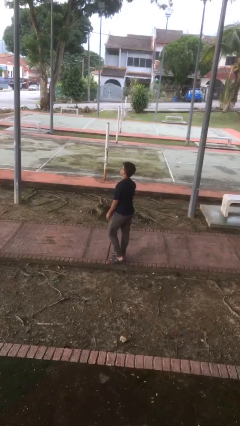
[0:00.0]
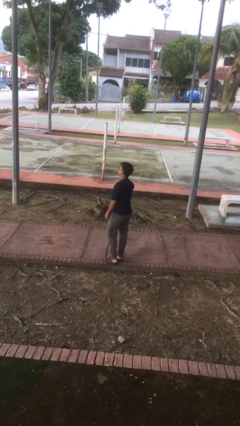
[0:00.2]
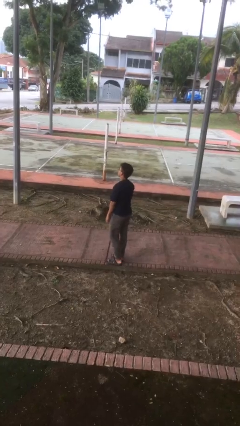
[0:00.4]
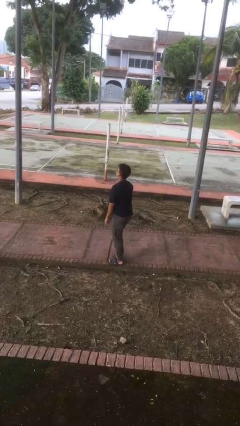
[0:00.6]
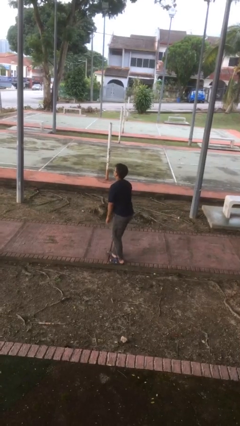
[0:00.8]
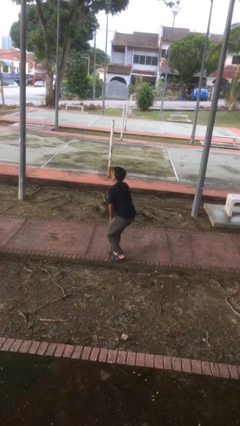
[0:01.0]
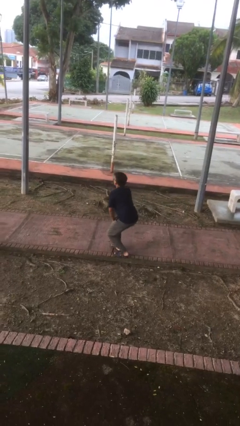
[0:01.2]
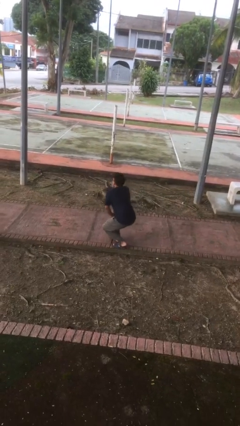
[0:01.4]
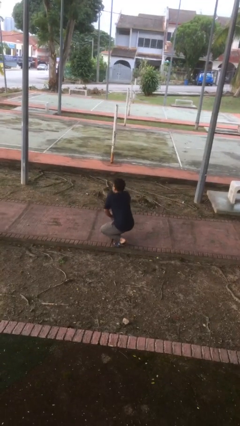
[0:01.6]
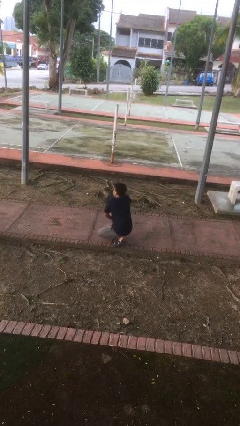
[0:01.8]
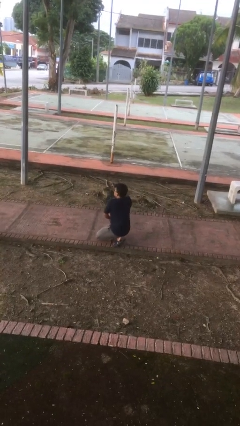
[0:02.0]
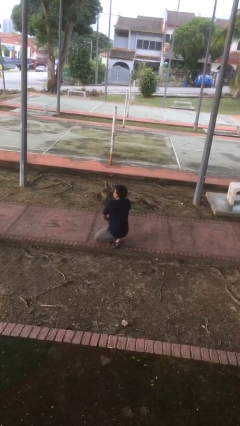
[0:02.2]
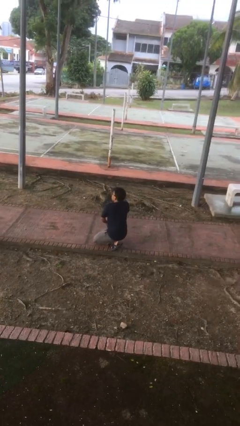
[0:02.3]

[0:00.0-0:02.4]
person kneels

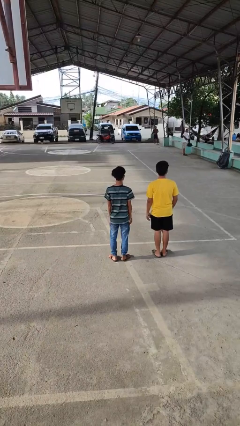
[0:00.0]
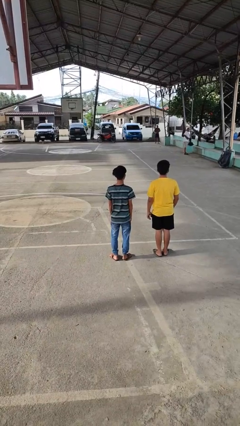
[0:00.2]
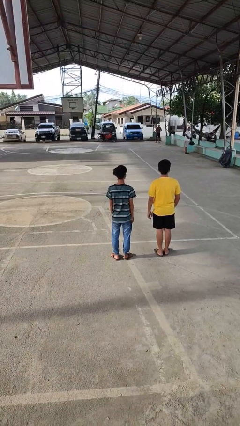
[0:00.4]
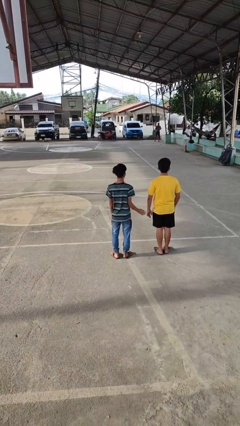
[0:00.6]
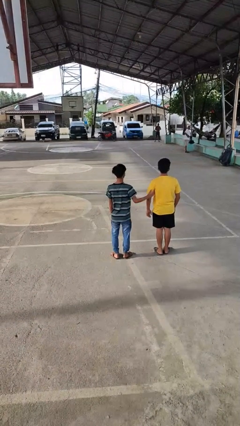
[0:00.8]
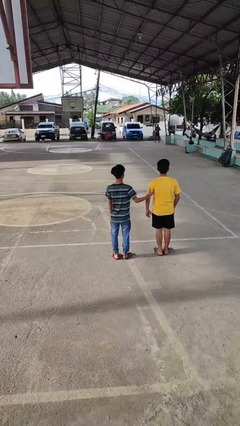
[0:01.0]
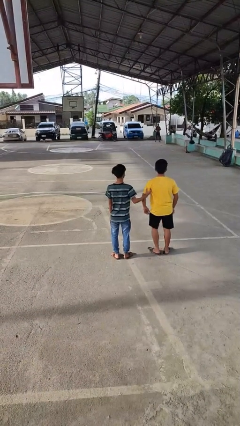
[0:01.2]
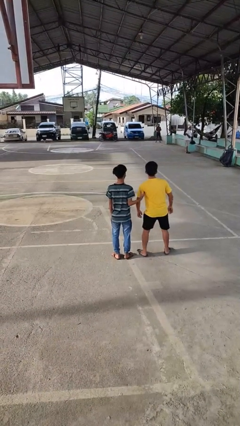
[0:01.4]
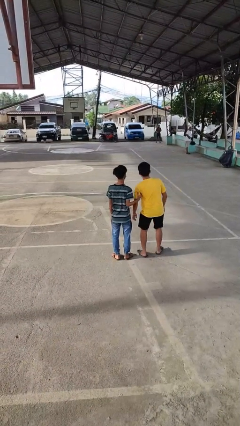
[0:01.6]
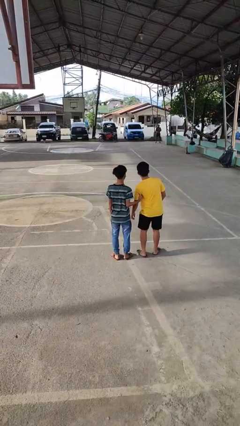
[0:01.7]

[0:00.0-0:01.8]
person grabs person by bicep

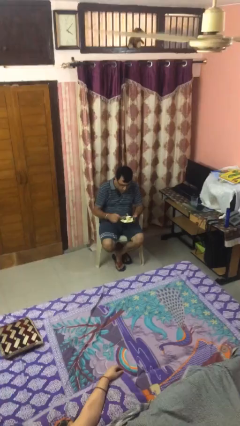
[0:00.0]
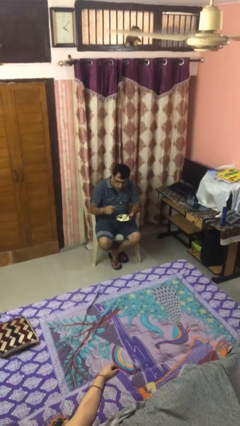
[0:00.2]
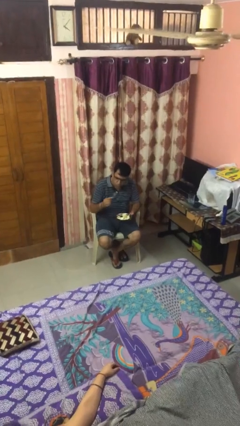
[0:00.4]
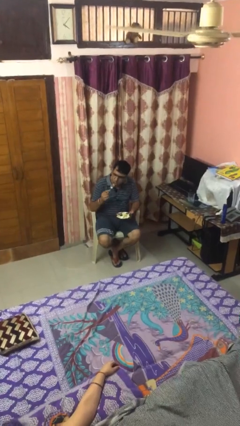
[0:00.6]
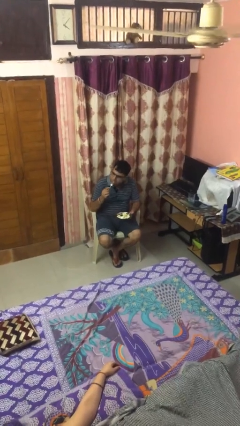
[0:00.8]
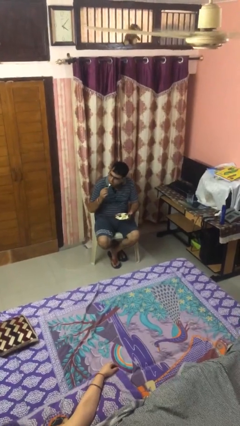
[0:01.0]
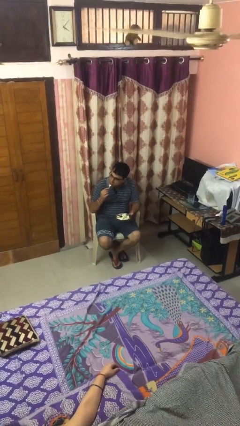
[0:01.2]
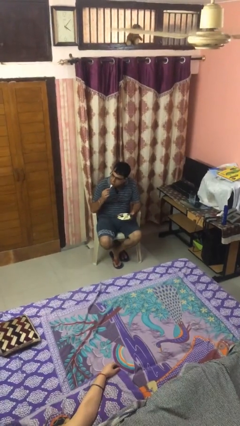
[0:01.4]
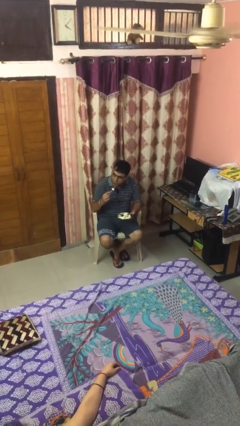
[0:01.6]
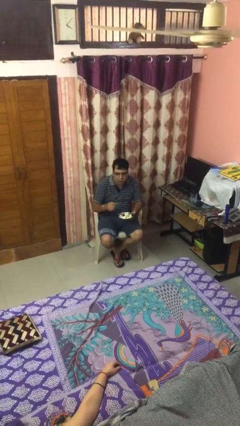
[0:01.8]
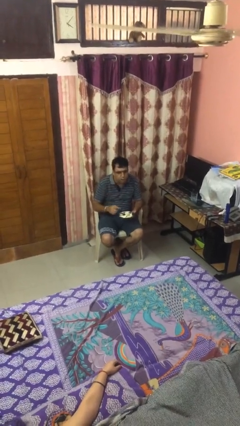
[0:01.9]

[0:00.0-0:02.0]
person eats with utensil

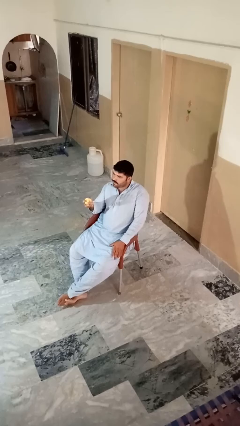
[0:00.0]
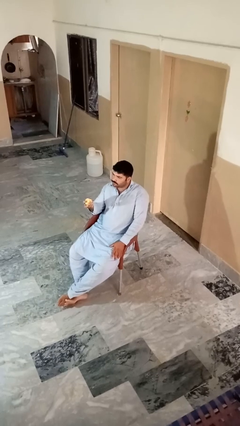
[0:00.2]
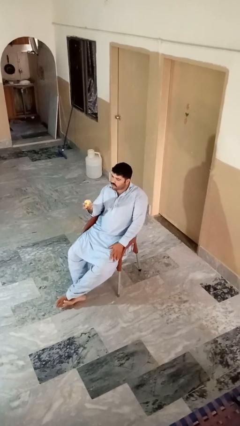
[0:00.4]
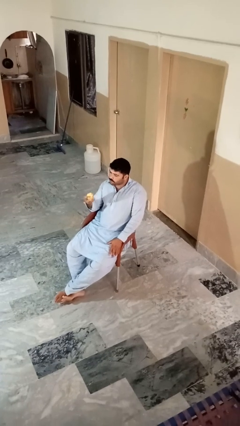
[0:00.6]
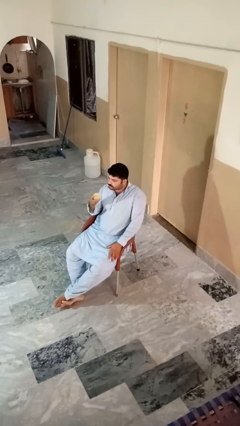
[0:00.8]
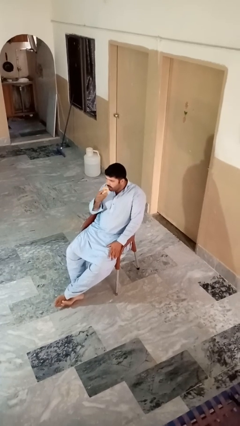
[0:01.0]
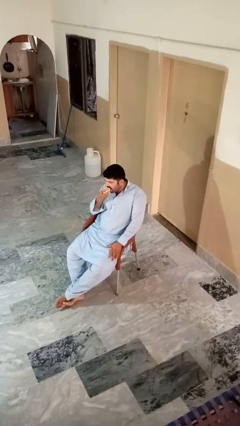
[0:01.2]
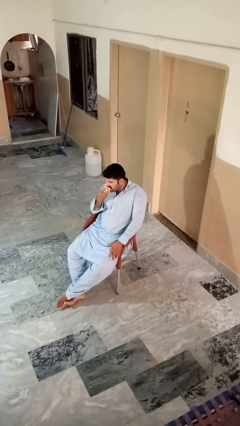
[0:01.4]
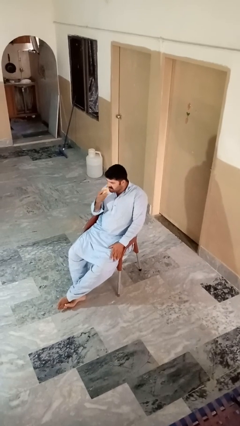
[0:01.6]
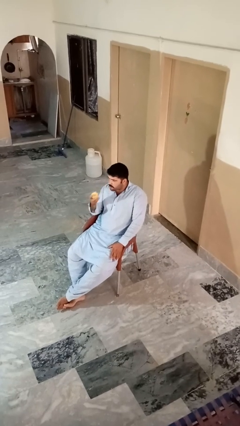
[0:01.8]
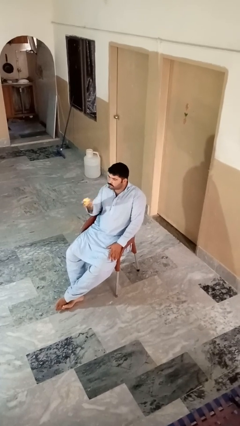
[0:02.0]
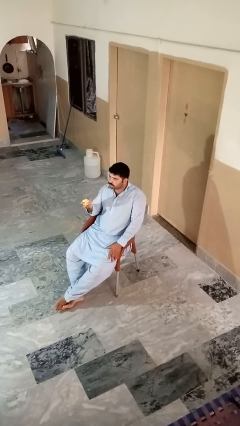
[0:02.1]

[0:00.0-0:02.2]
person eats apple

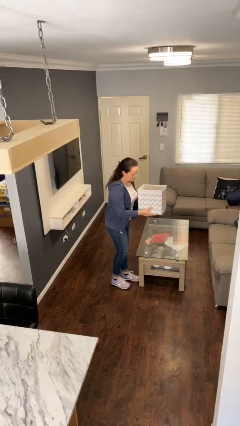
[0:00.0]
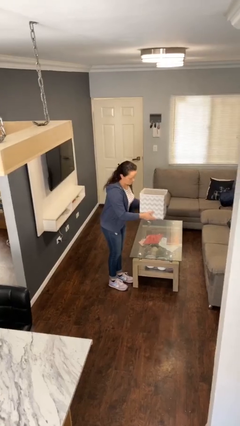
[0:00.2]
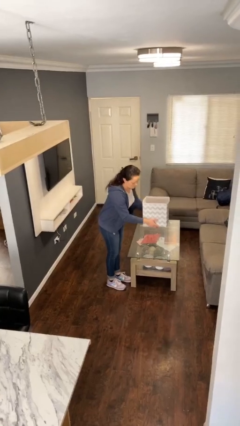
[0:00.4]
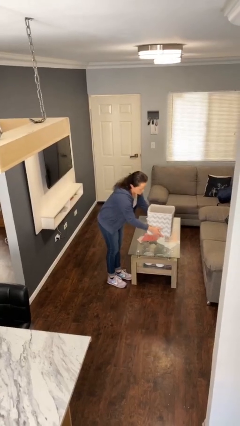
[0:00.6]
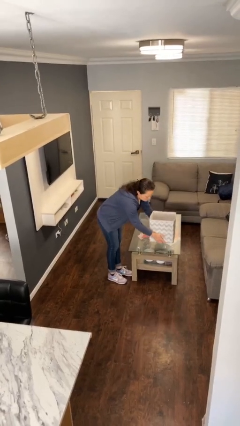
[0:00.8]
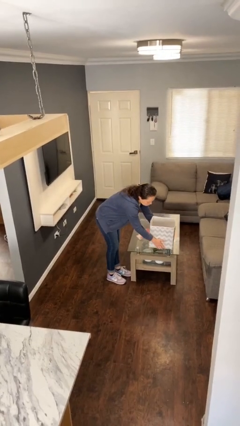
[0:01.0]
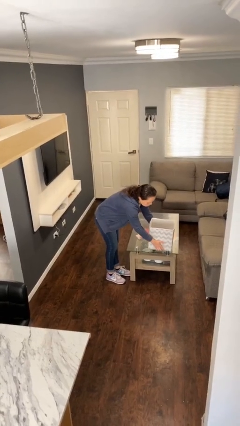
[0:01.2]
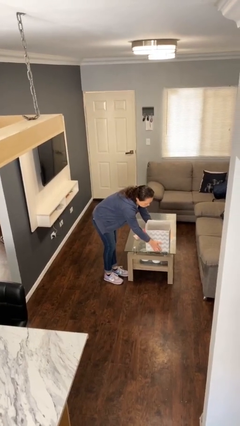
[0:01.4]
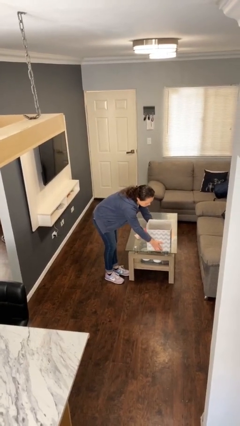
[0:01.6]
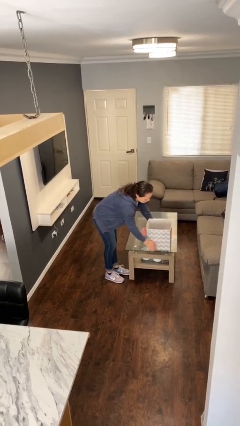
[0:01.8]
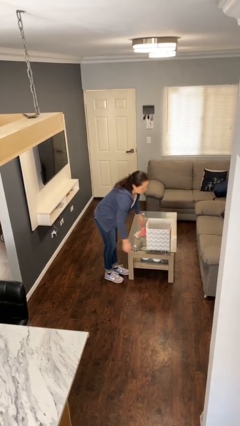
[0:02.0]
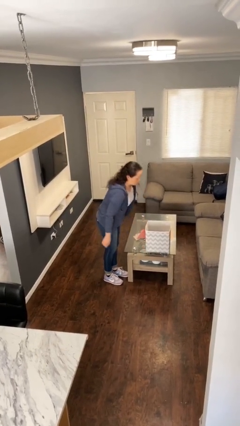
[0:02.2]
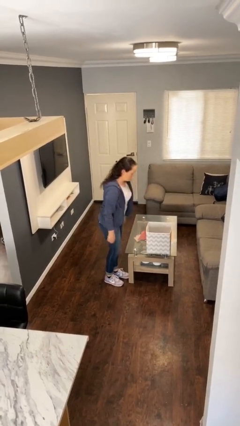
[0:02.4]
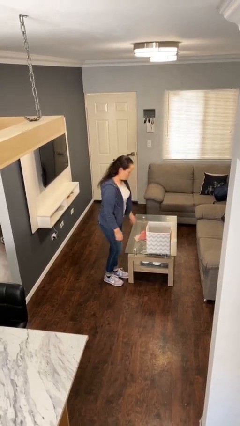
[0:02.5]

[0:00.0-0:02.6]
person puts down object on table

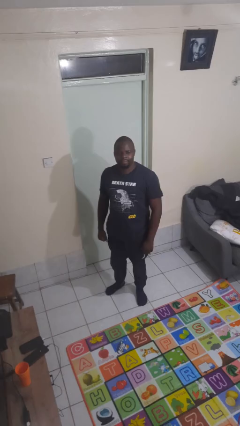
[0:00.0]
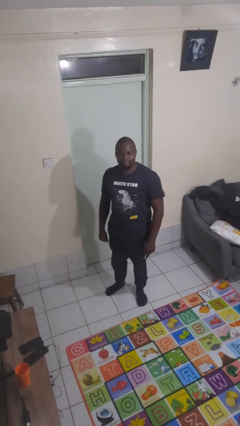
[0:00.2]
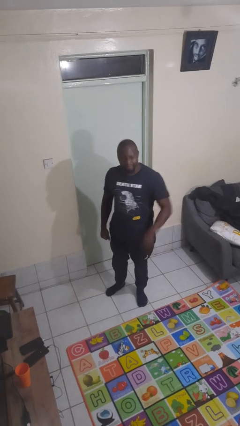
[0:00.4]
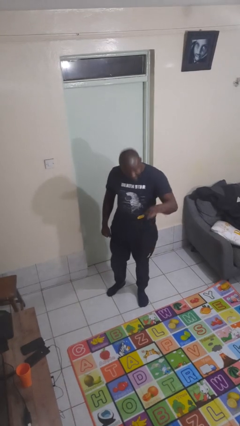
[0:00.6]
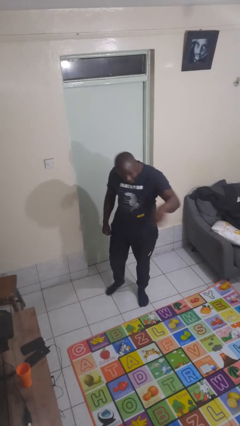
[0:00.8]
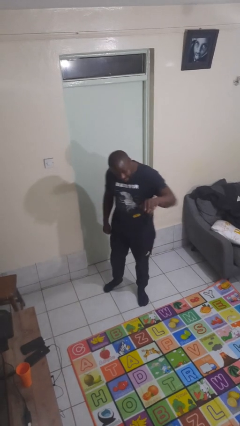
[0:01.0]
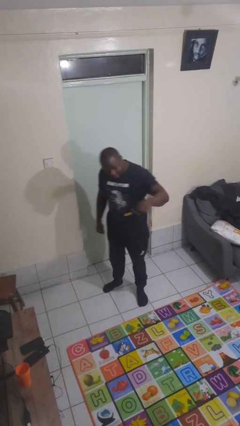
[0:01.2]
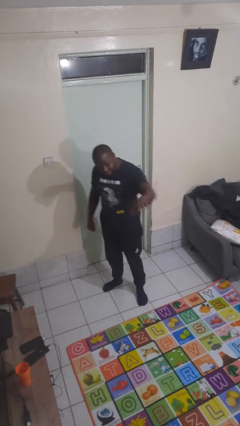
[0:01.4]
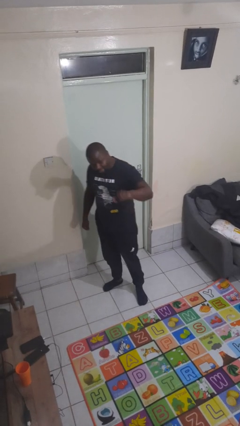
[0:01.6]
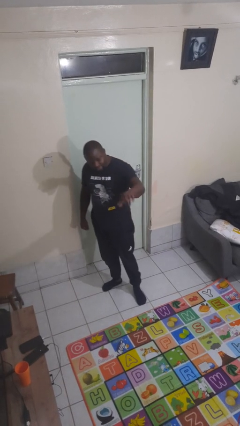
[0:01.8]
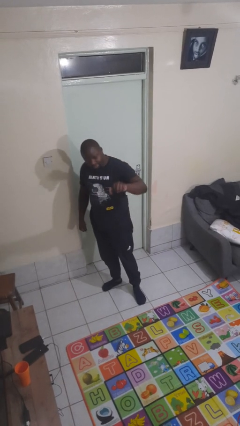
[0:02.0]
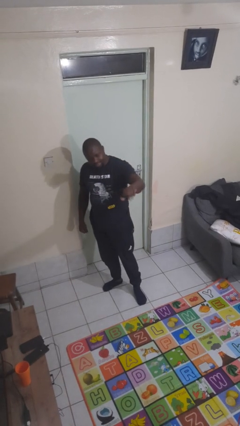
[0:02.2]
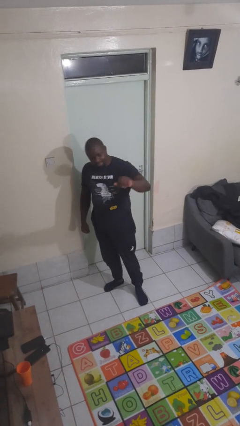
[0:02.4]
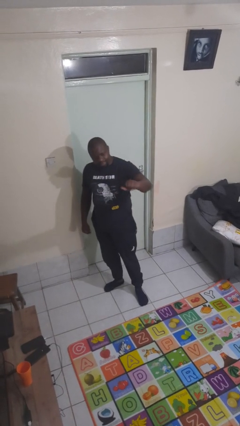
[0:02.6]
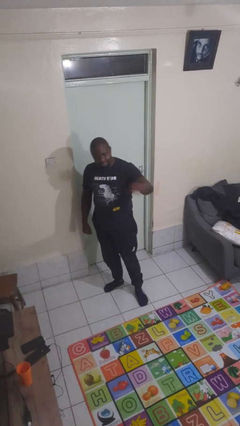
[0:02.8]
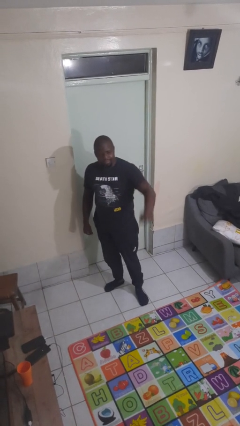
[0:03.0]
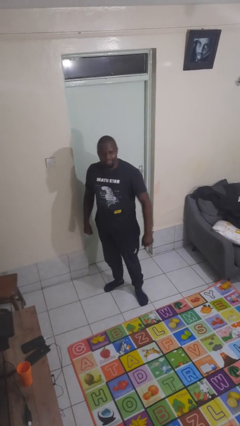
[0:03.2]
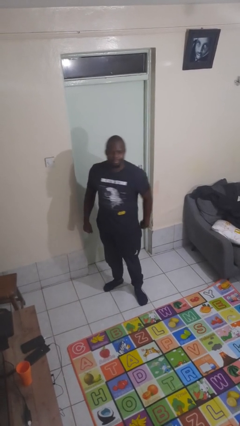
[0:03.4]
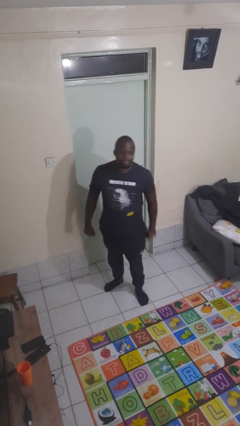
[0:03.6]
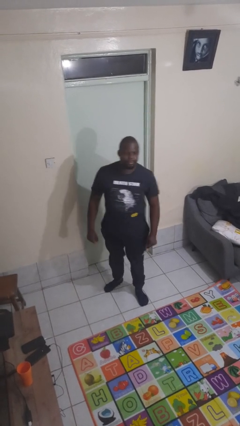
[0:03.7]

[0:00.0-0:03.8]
person gestures come here

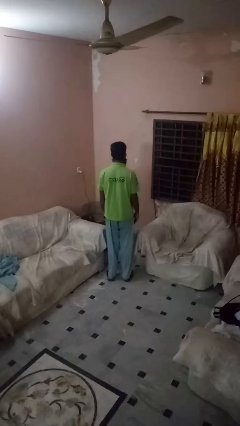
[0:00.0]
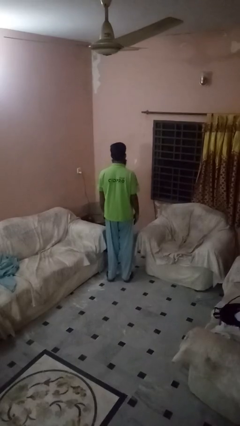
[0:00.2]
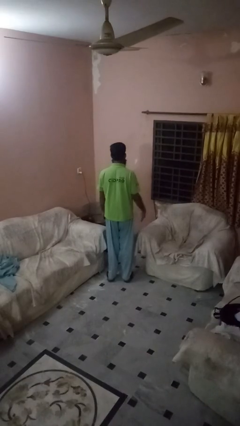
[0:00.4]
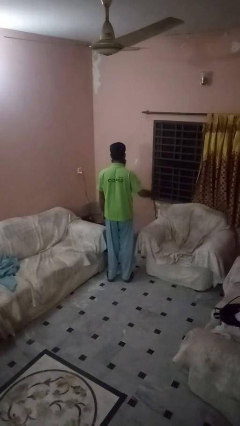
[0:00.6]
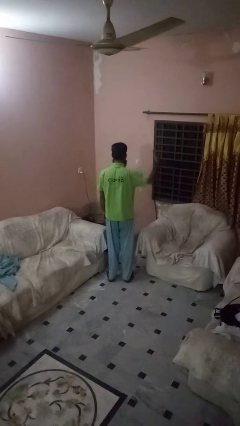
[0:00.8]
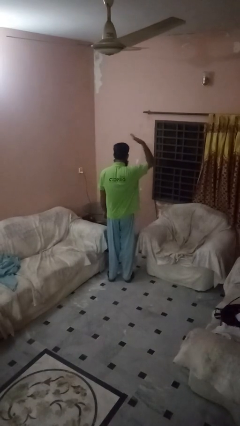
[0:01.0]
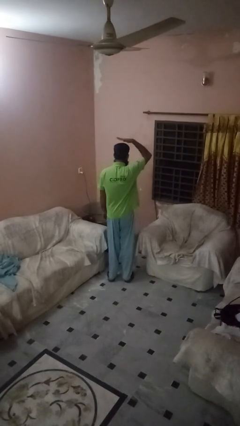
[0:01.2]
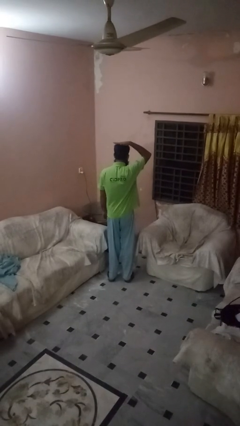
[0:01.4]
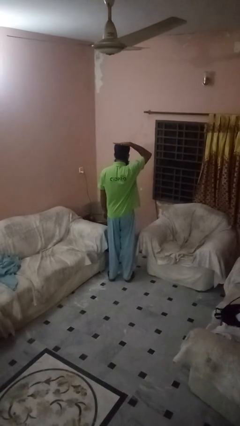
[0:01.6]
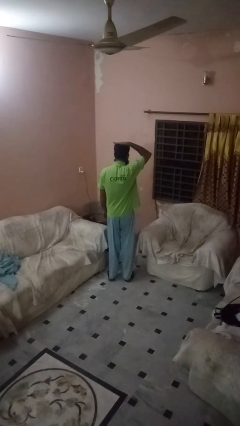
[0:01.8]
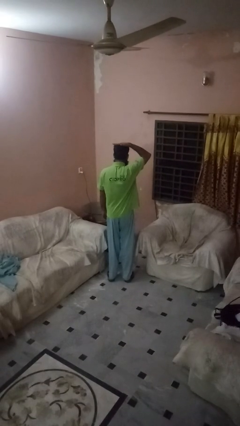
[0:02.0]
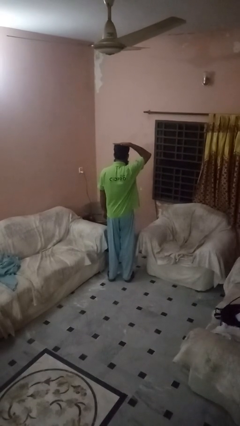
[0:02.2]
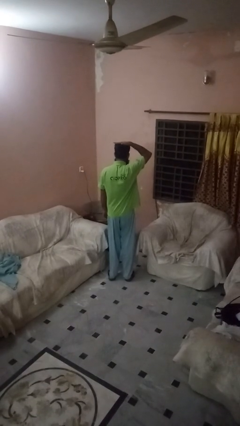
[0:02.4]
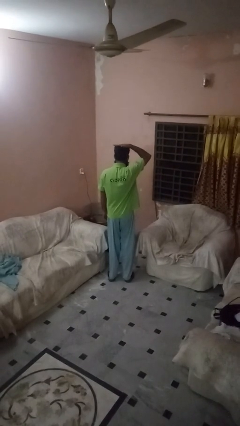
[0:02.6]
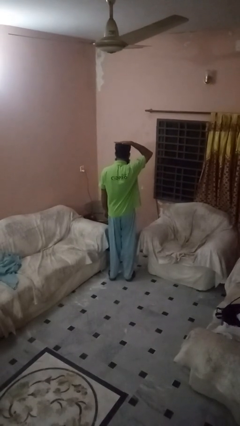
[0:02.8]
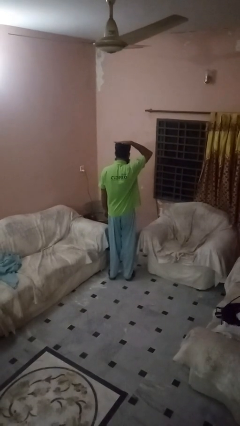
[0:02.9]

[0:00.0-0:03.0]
person pats head
